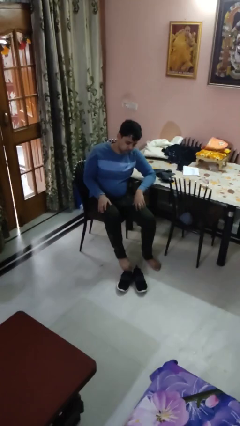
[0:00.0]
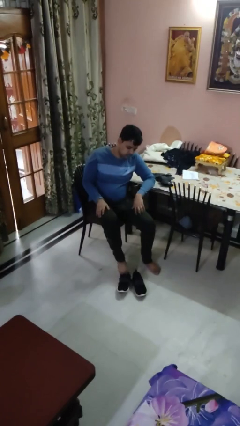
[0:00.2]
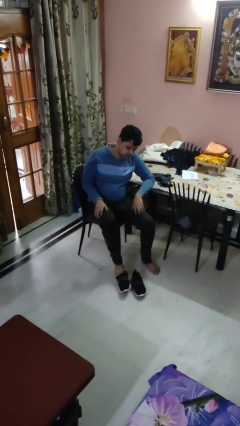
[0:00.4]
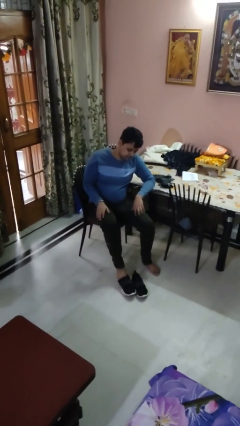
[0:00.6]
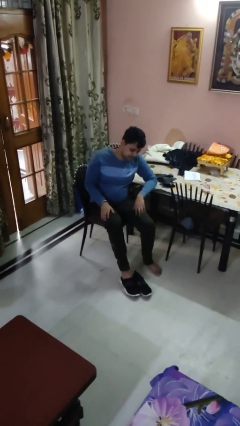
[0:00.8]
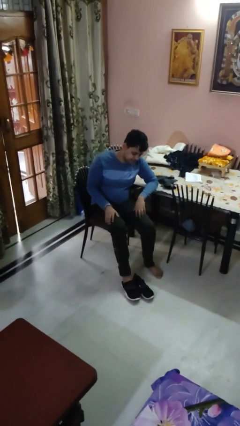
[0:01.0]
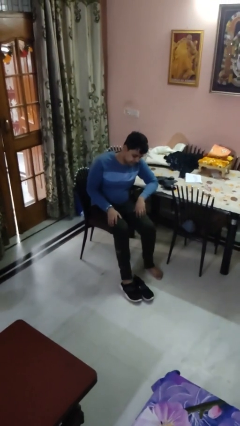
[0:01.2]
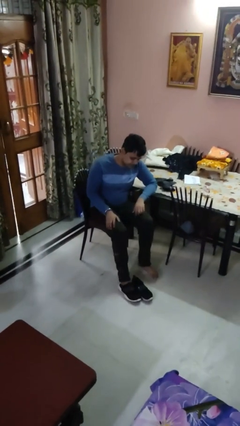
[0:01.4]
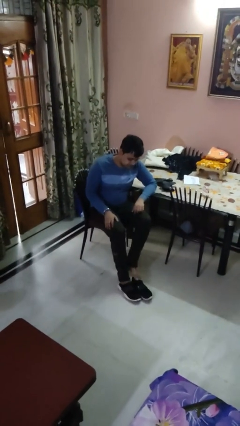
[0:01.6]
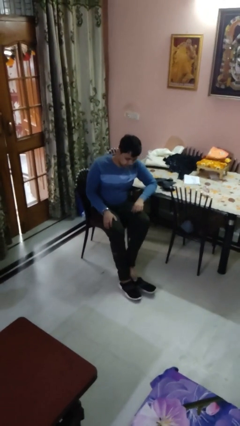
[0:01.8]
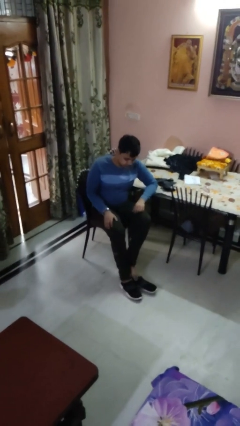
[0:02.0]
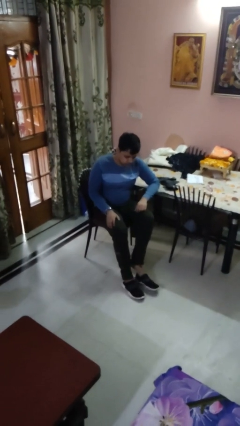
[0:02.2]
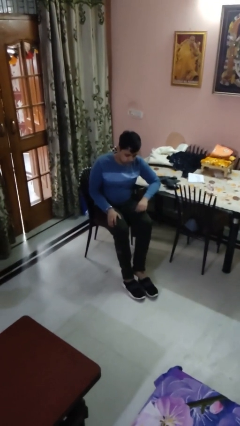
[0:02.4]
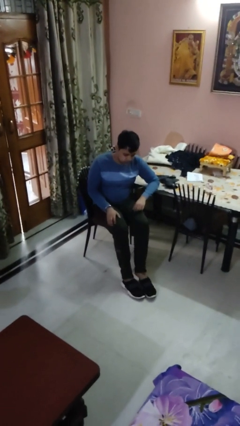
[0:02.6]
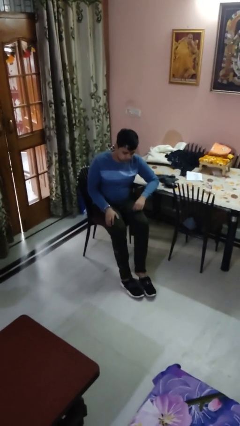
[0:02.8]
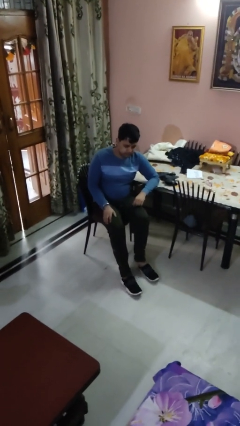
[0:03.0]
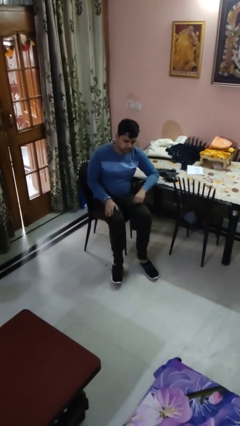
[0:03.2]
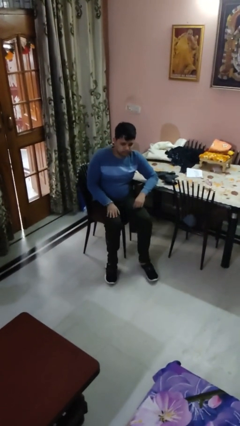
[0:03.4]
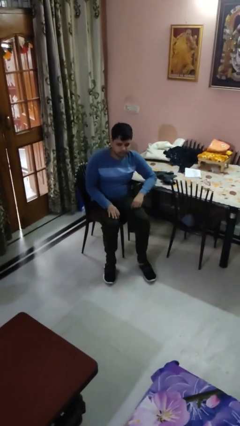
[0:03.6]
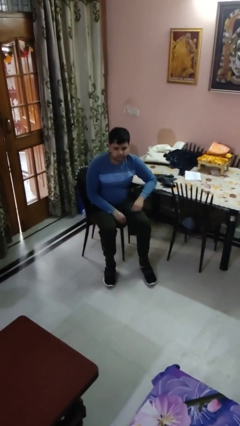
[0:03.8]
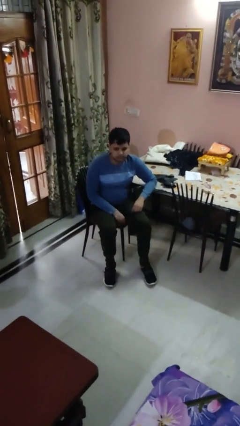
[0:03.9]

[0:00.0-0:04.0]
person puts on shoes

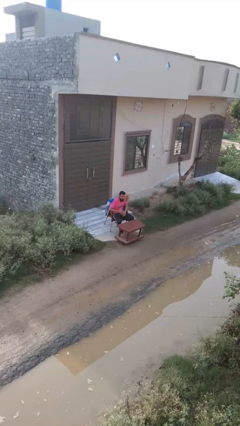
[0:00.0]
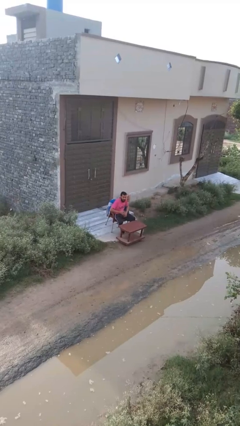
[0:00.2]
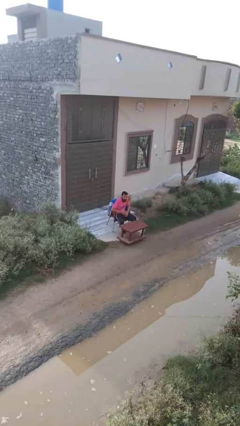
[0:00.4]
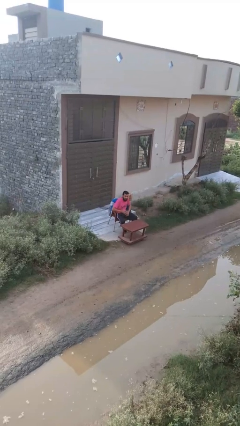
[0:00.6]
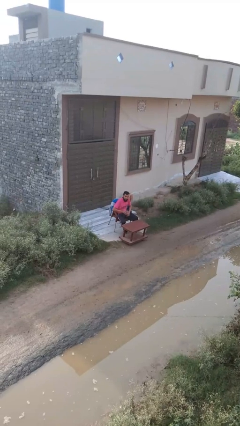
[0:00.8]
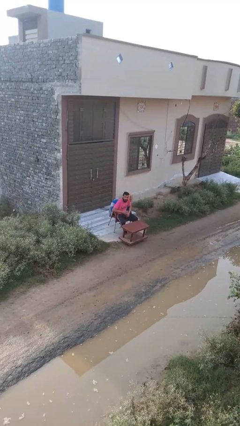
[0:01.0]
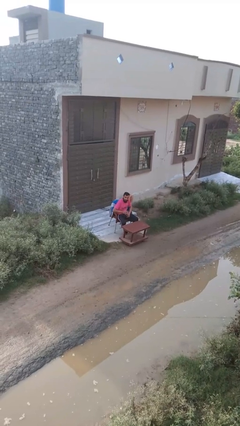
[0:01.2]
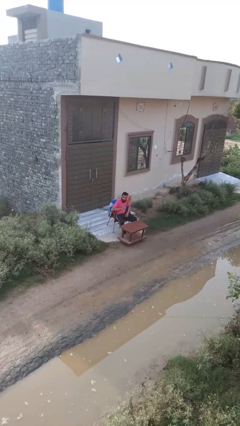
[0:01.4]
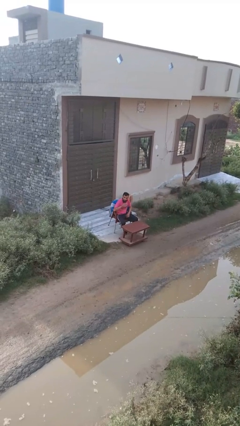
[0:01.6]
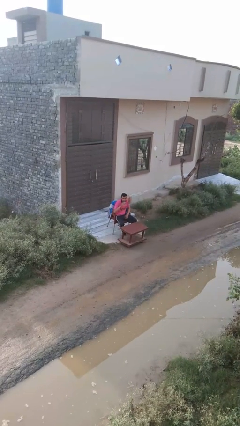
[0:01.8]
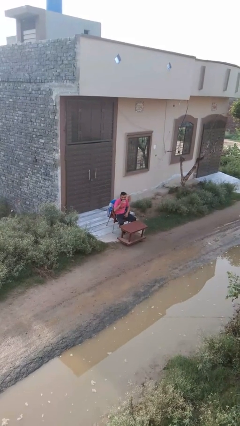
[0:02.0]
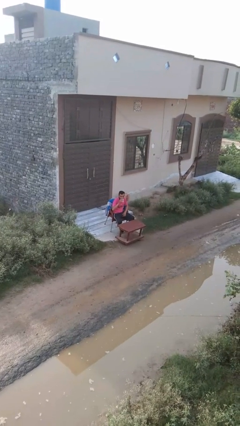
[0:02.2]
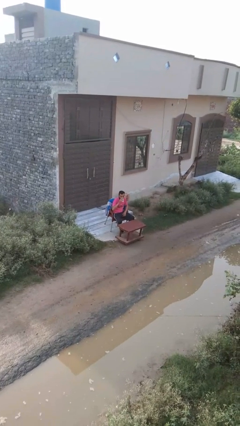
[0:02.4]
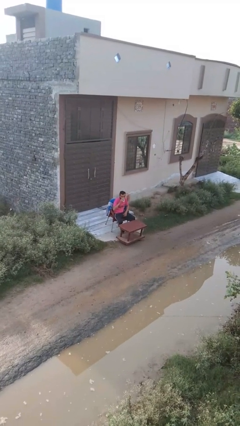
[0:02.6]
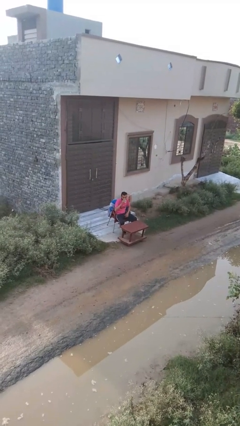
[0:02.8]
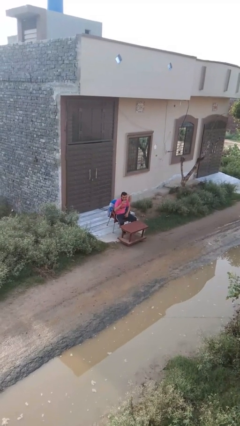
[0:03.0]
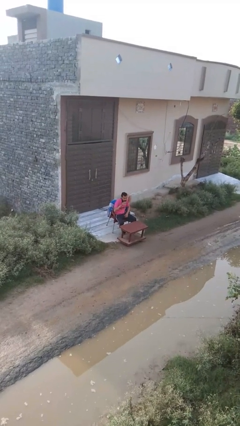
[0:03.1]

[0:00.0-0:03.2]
person drinks from mug

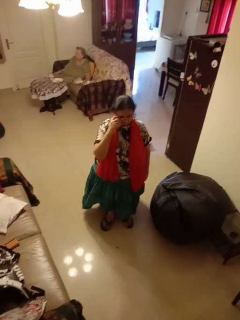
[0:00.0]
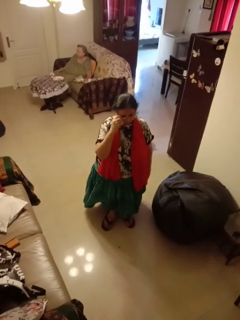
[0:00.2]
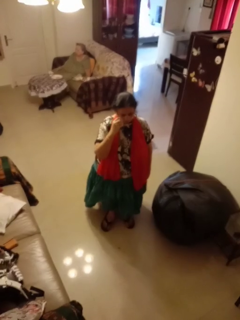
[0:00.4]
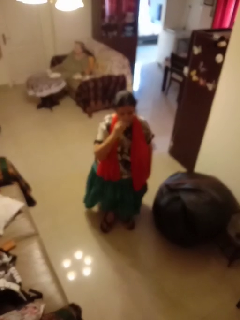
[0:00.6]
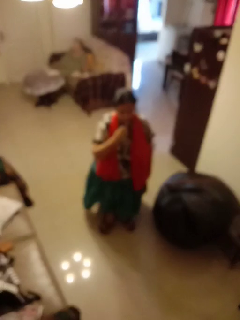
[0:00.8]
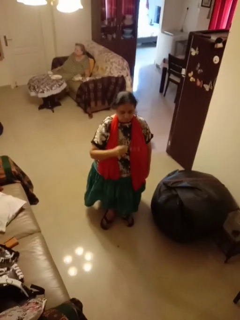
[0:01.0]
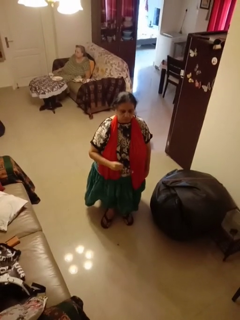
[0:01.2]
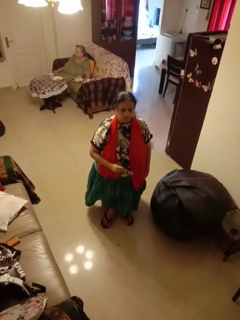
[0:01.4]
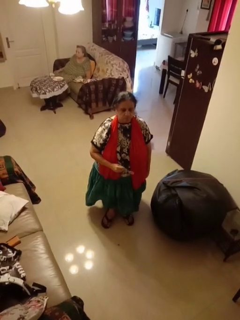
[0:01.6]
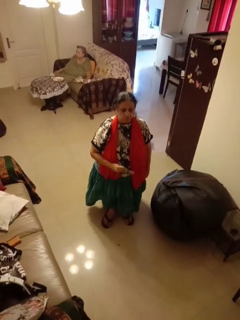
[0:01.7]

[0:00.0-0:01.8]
person takes off glasses

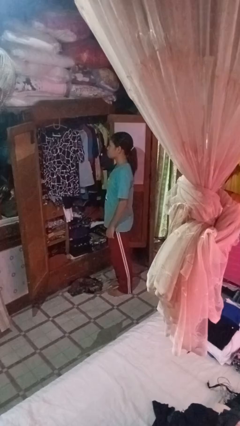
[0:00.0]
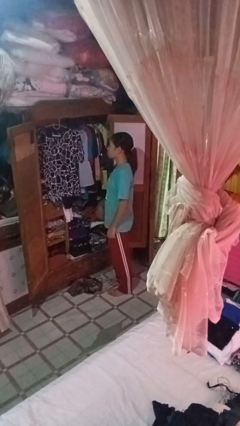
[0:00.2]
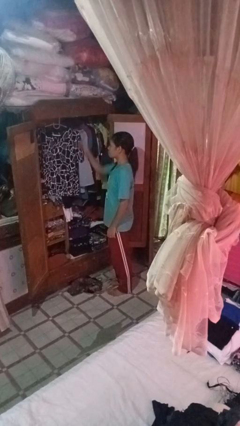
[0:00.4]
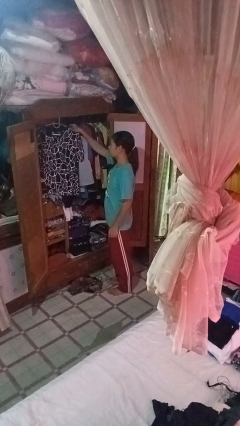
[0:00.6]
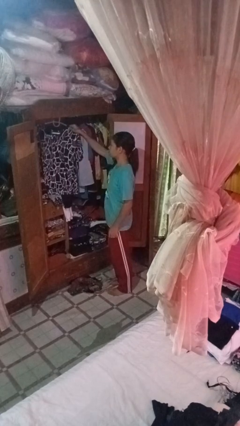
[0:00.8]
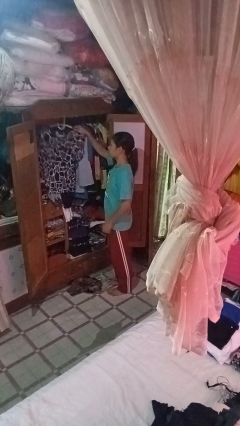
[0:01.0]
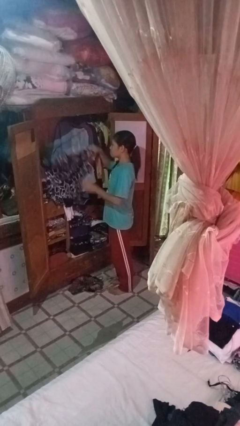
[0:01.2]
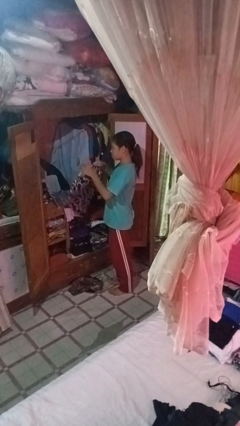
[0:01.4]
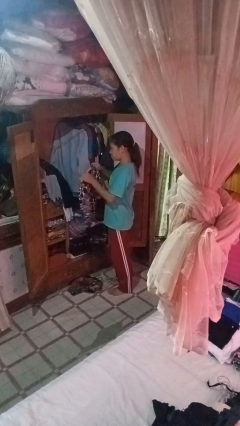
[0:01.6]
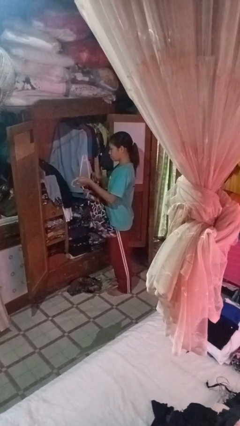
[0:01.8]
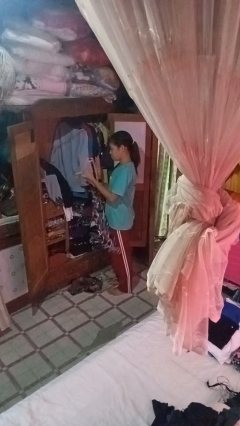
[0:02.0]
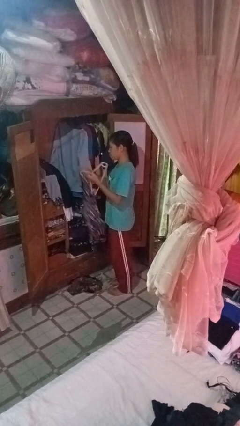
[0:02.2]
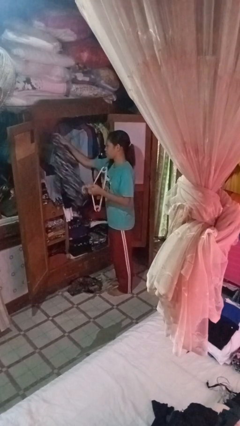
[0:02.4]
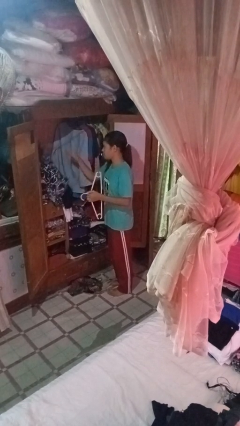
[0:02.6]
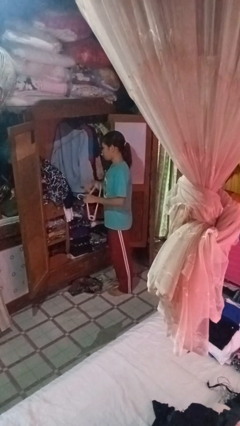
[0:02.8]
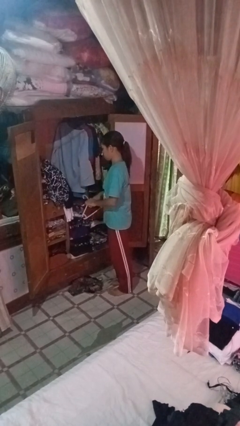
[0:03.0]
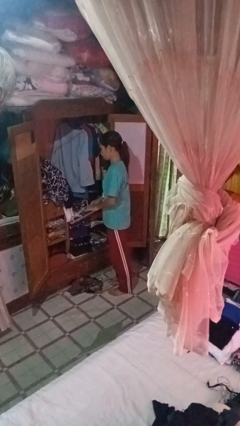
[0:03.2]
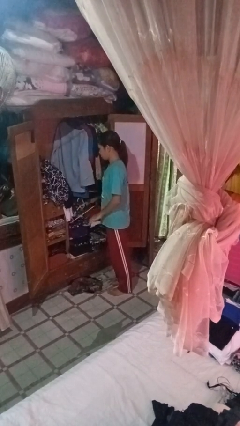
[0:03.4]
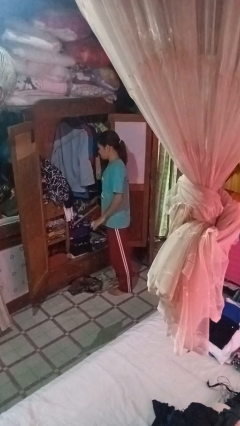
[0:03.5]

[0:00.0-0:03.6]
person takes clothes from closet

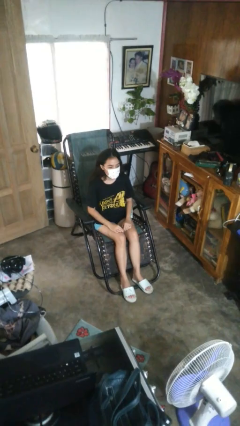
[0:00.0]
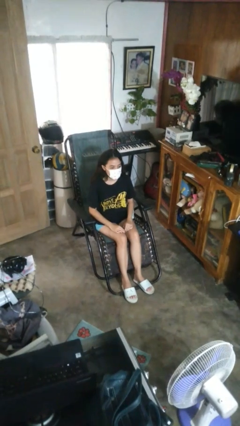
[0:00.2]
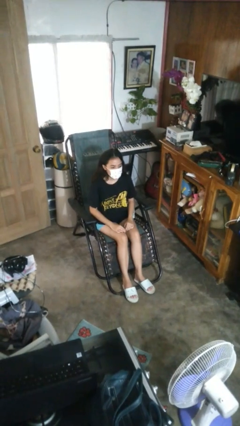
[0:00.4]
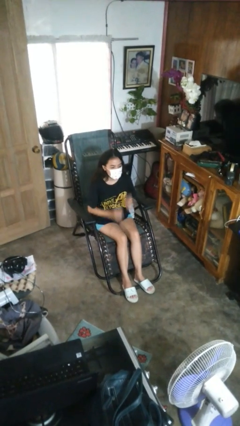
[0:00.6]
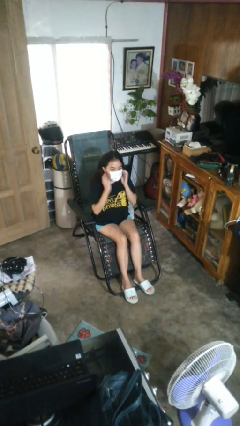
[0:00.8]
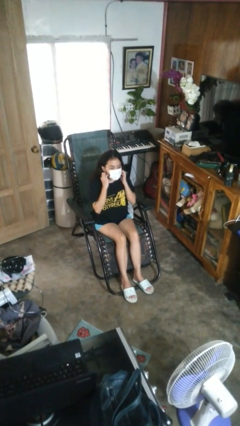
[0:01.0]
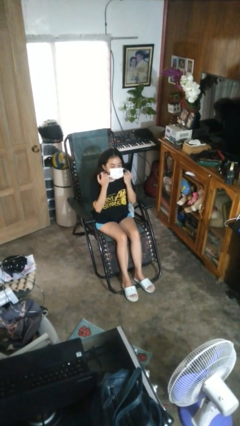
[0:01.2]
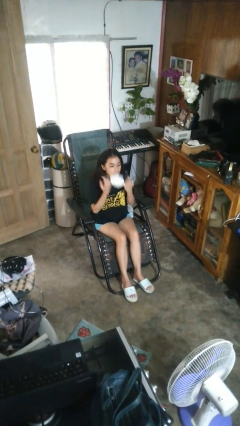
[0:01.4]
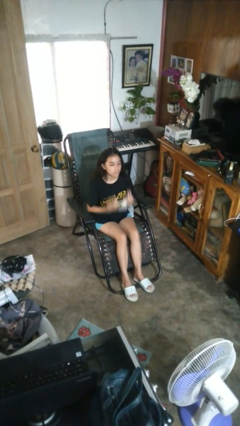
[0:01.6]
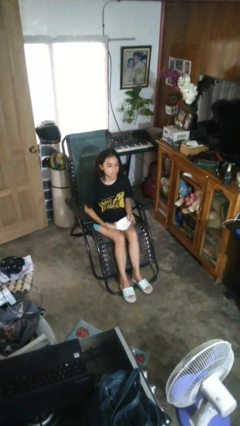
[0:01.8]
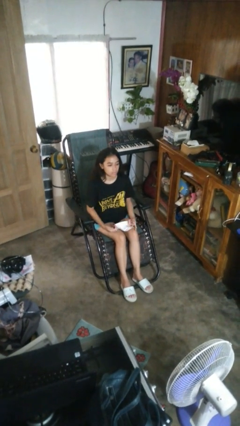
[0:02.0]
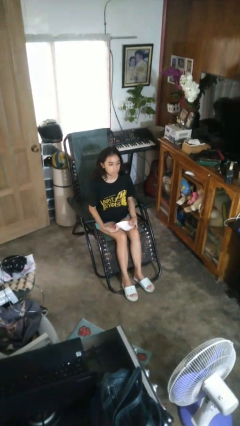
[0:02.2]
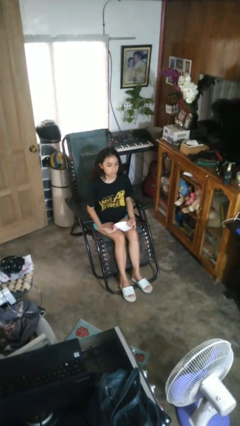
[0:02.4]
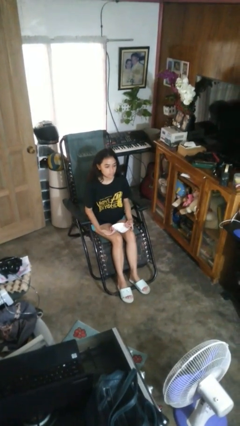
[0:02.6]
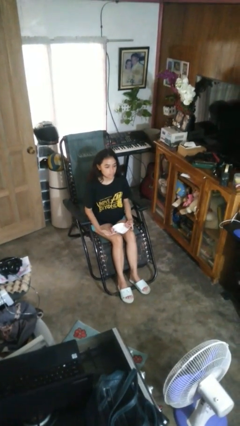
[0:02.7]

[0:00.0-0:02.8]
person takes off facemask

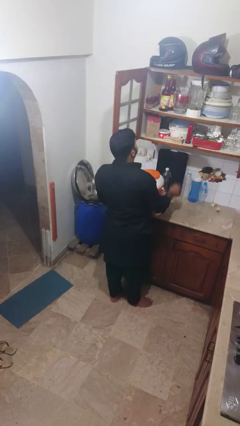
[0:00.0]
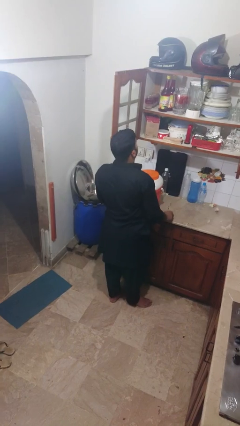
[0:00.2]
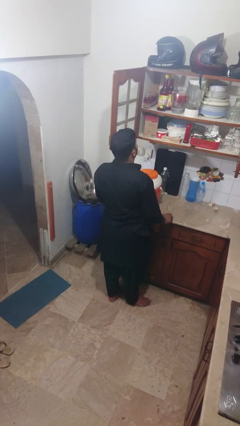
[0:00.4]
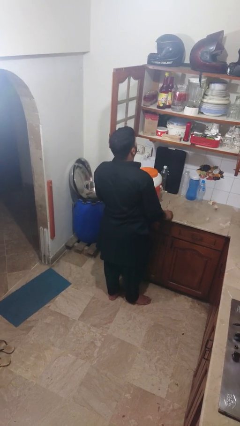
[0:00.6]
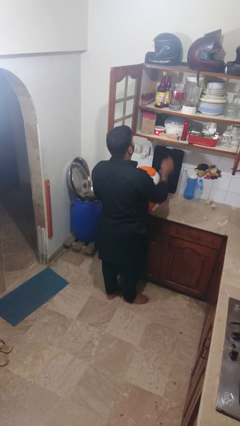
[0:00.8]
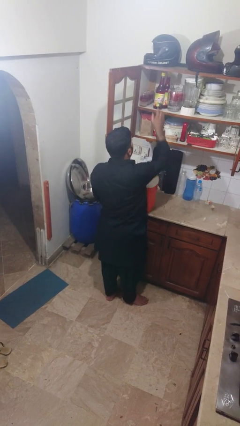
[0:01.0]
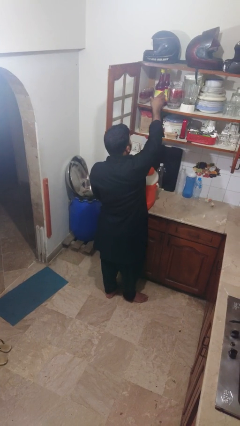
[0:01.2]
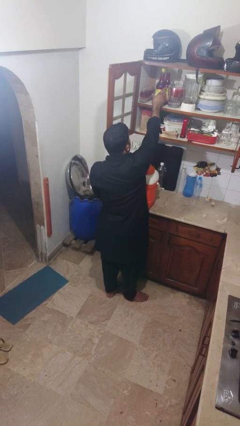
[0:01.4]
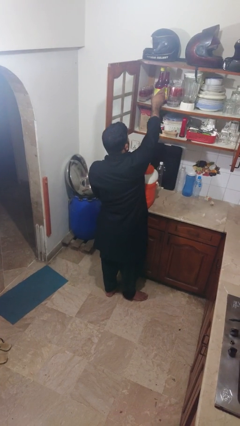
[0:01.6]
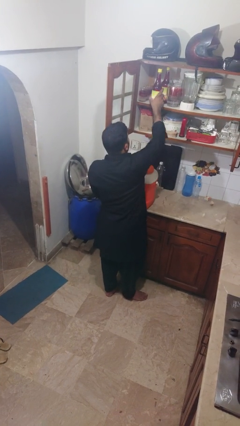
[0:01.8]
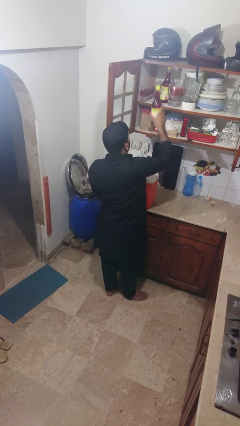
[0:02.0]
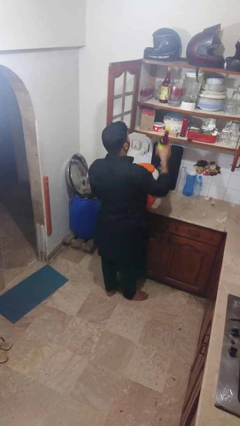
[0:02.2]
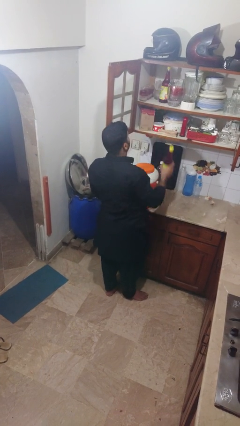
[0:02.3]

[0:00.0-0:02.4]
person picks up object from cabinet

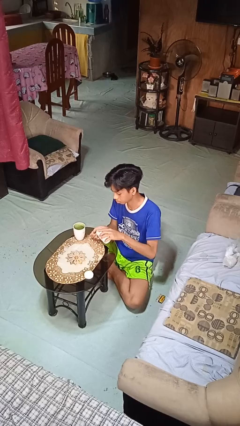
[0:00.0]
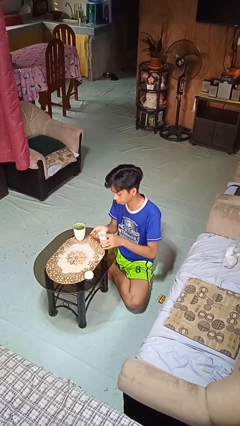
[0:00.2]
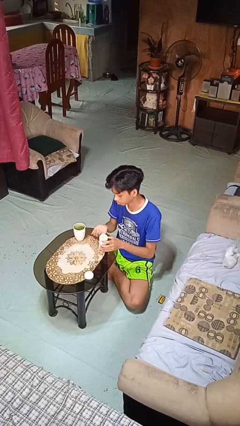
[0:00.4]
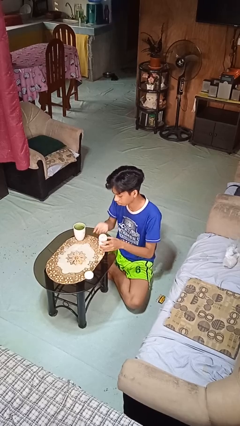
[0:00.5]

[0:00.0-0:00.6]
person takes medicine pills
